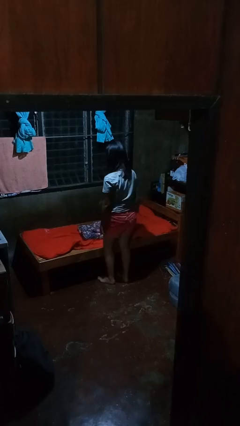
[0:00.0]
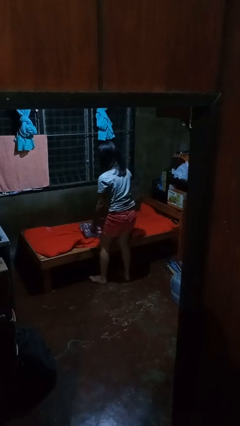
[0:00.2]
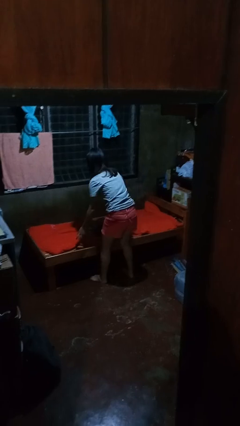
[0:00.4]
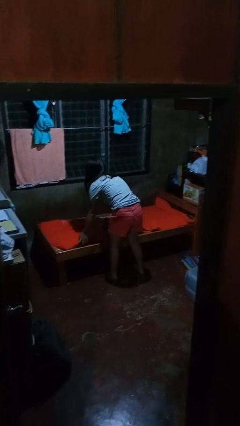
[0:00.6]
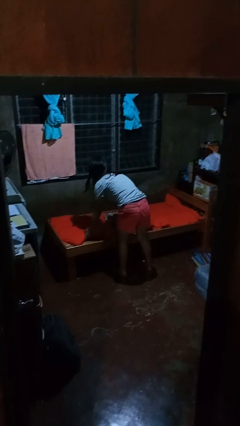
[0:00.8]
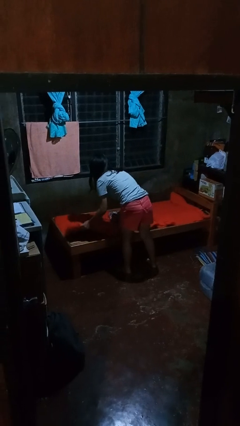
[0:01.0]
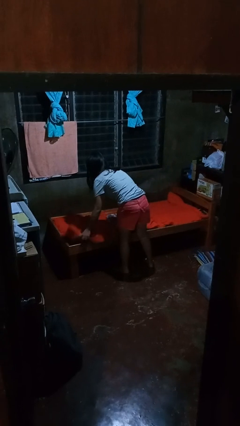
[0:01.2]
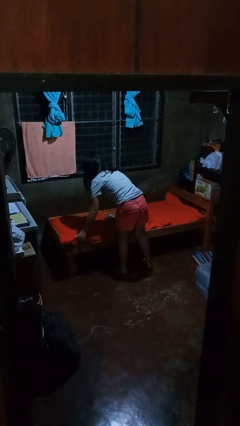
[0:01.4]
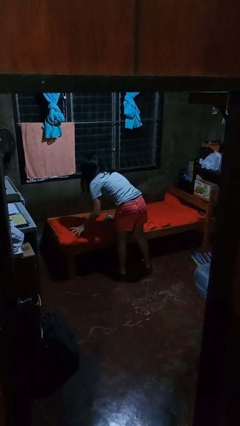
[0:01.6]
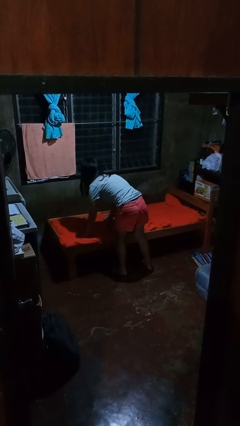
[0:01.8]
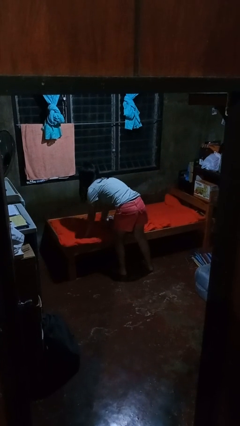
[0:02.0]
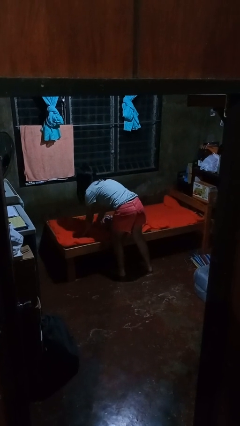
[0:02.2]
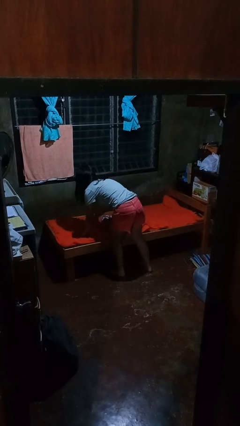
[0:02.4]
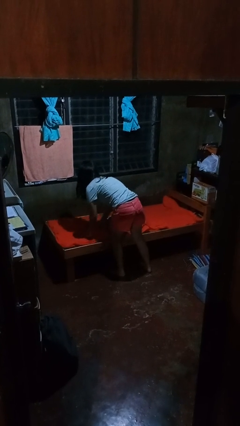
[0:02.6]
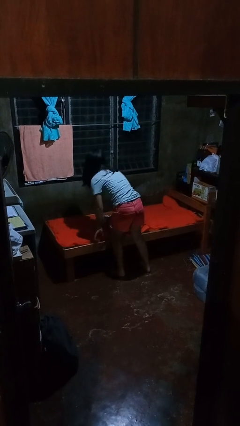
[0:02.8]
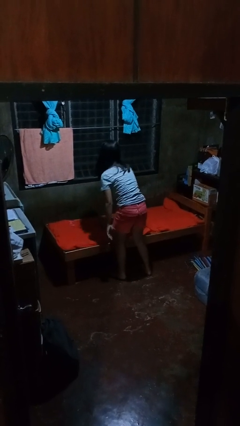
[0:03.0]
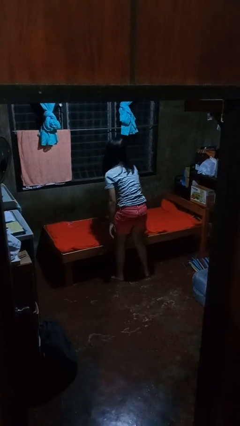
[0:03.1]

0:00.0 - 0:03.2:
person makes bed

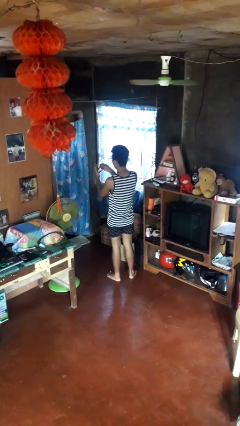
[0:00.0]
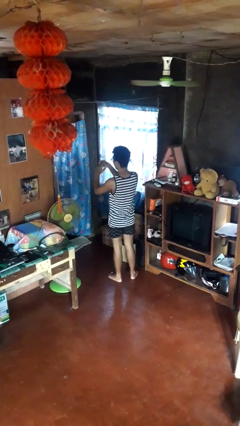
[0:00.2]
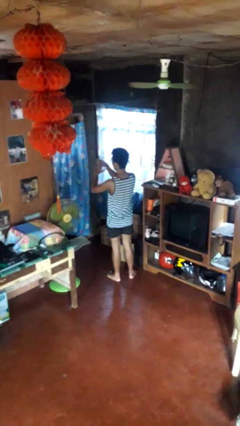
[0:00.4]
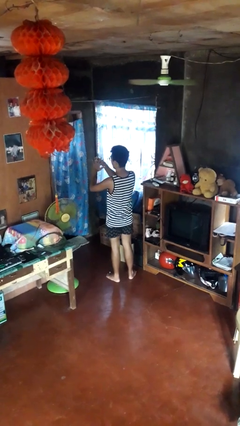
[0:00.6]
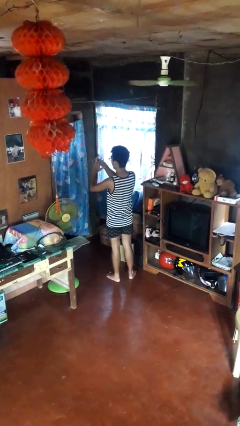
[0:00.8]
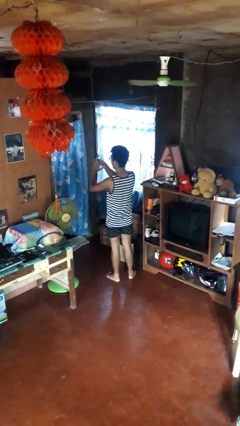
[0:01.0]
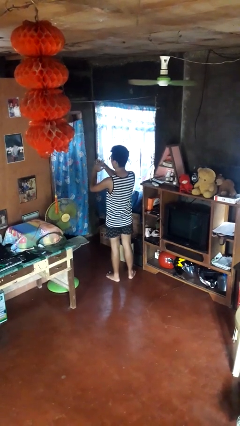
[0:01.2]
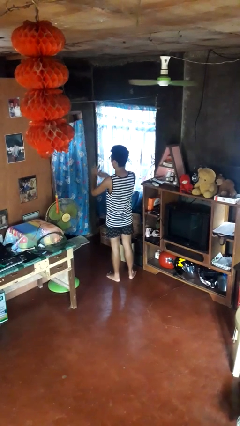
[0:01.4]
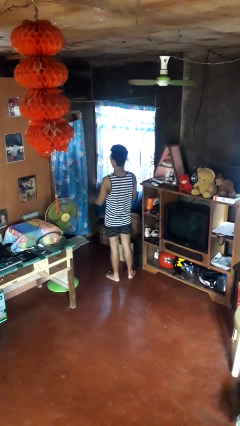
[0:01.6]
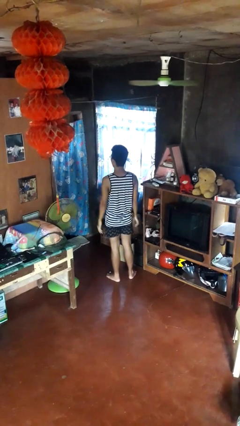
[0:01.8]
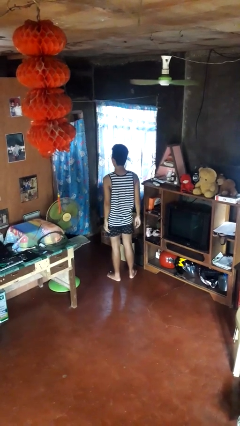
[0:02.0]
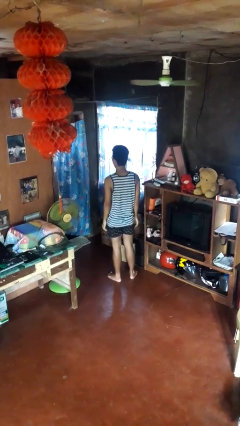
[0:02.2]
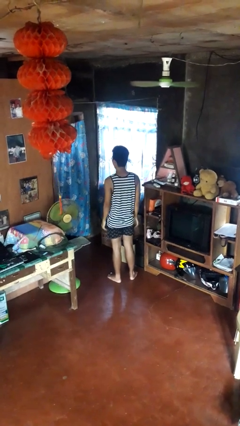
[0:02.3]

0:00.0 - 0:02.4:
person puts on ring

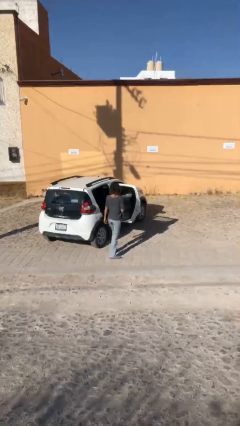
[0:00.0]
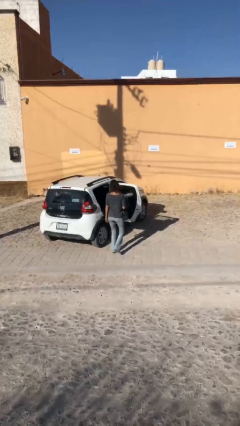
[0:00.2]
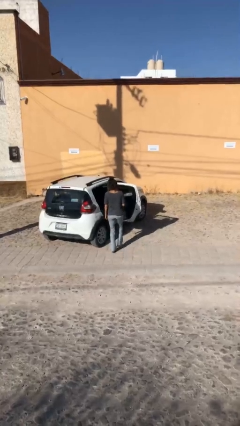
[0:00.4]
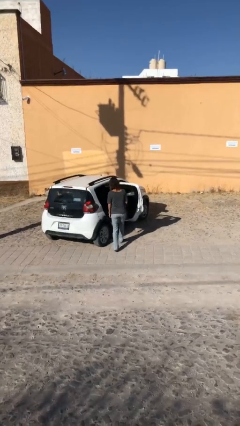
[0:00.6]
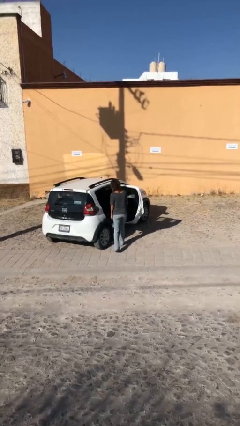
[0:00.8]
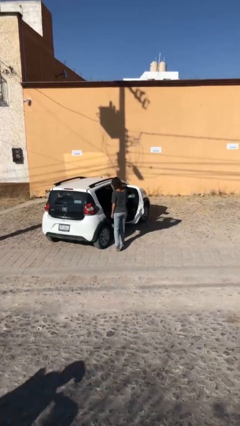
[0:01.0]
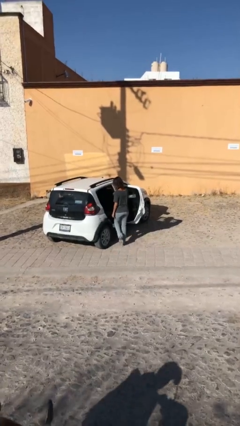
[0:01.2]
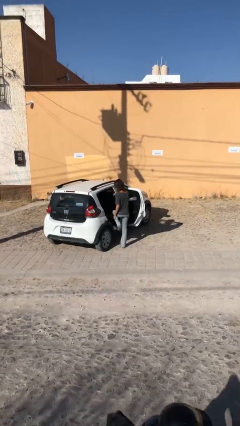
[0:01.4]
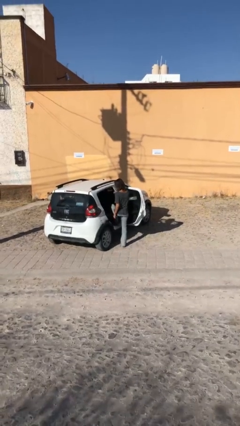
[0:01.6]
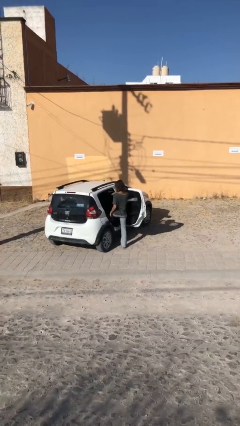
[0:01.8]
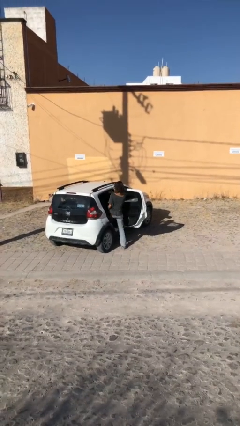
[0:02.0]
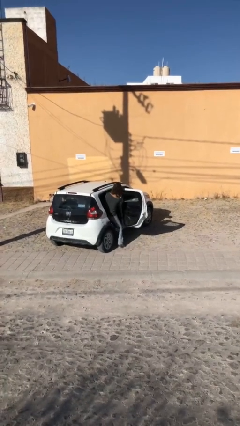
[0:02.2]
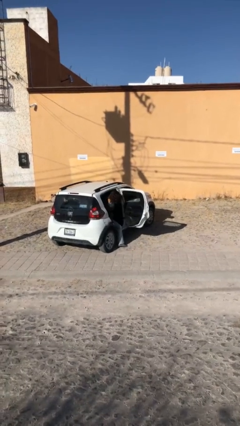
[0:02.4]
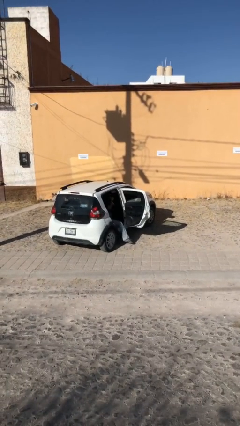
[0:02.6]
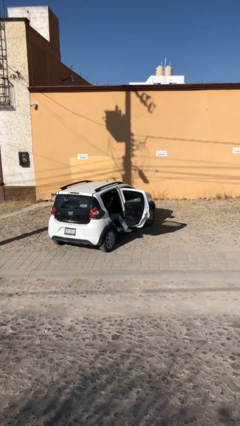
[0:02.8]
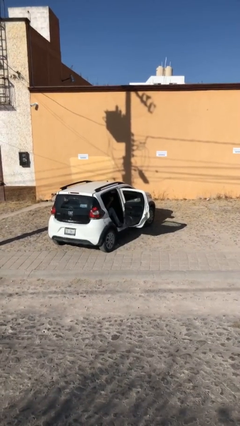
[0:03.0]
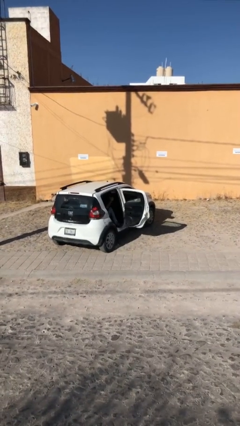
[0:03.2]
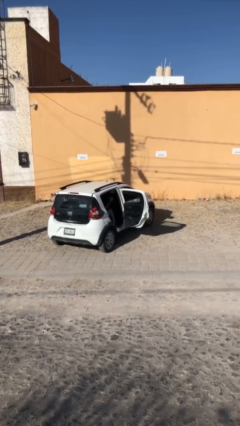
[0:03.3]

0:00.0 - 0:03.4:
person enters car

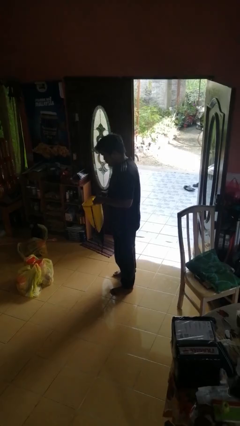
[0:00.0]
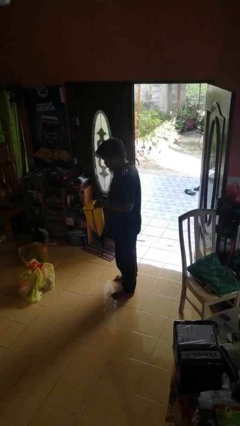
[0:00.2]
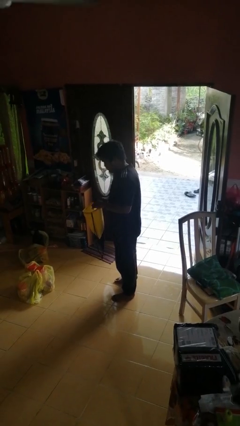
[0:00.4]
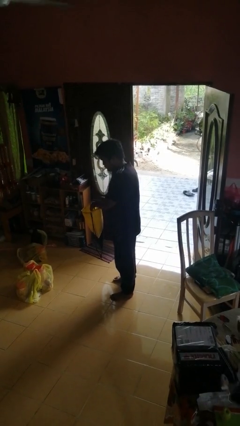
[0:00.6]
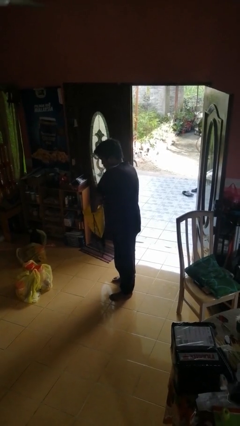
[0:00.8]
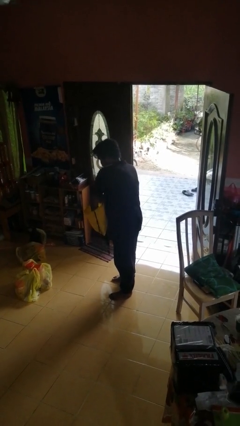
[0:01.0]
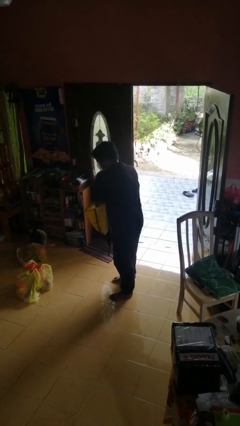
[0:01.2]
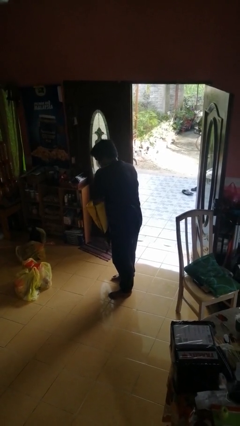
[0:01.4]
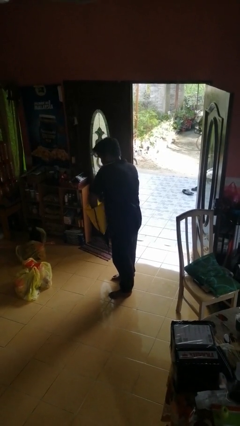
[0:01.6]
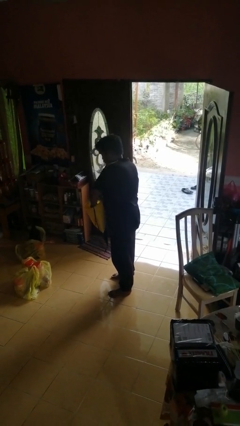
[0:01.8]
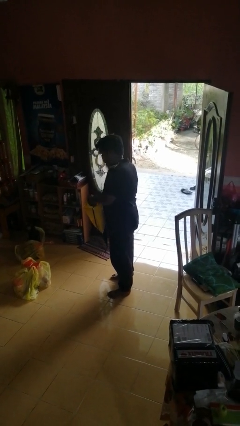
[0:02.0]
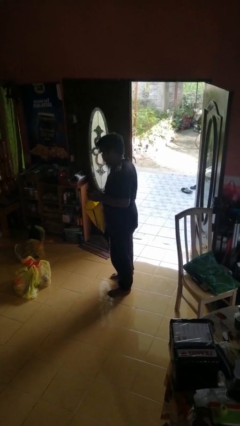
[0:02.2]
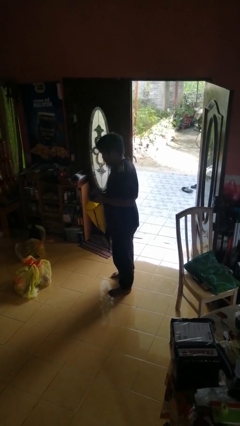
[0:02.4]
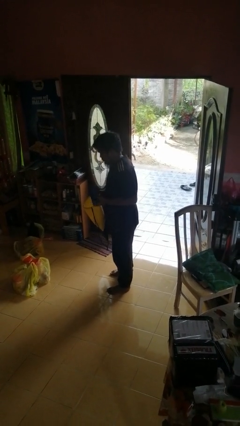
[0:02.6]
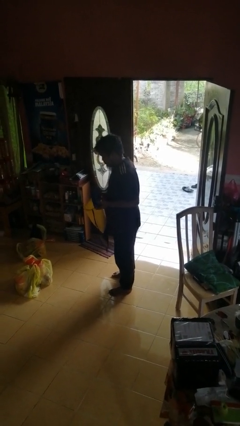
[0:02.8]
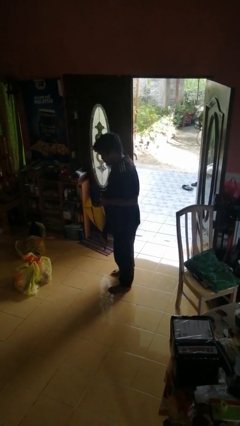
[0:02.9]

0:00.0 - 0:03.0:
person takes object from bag

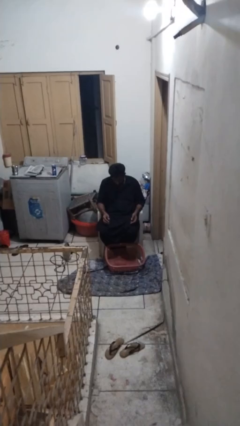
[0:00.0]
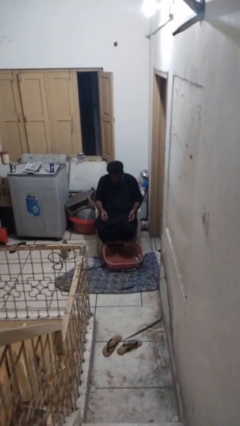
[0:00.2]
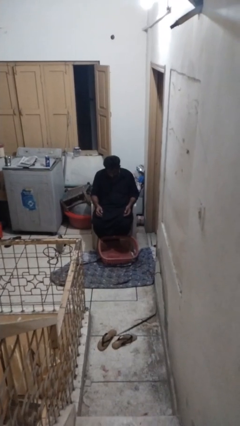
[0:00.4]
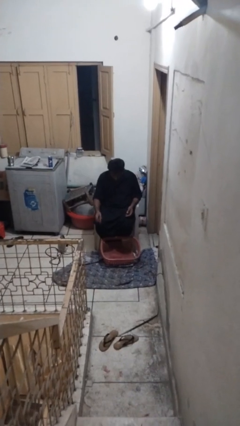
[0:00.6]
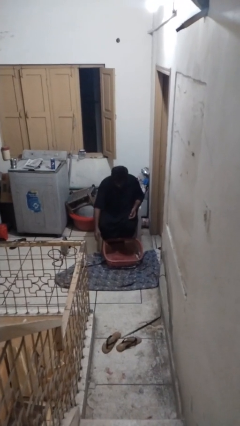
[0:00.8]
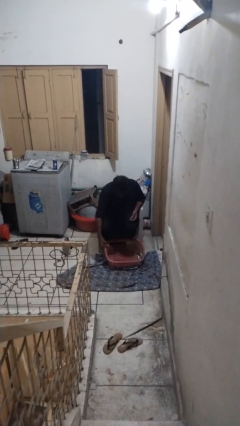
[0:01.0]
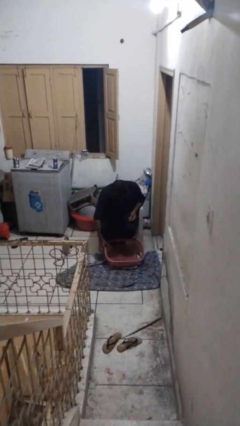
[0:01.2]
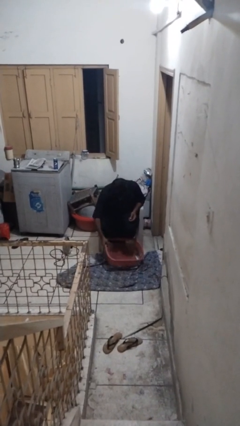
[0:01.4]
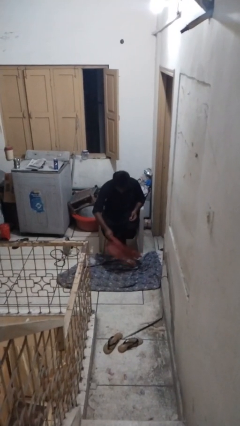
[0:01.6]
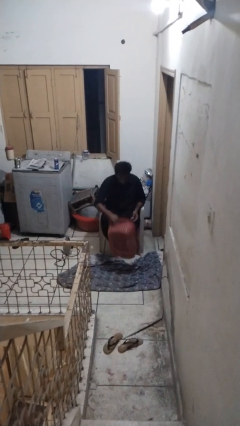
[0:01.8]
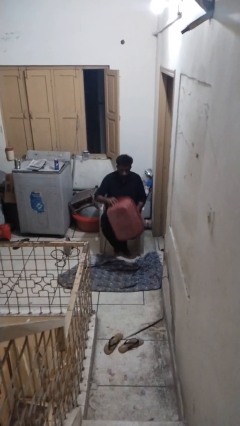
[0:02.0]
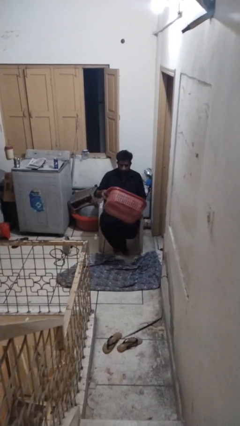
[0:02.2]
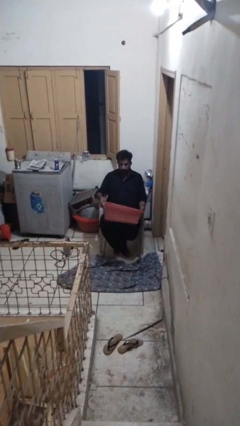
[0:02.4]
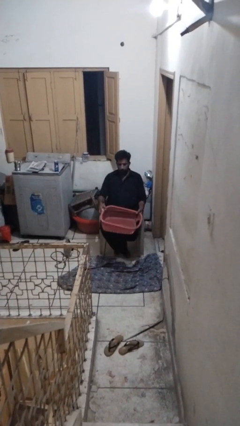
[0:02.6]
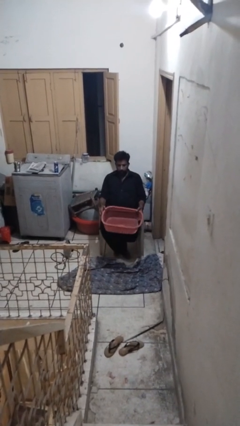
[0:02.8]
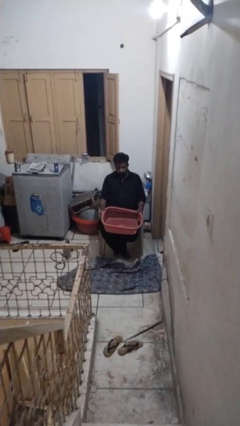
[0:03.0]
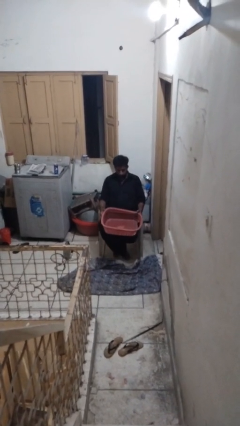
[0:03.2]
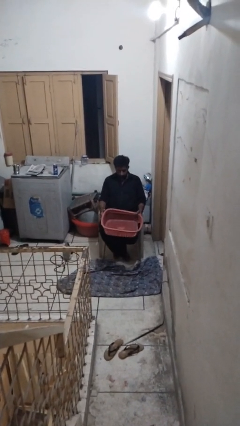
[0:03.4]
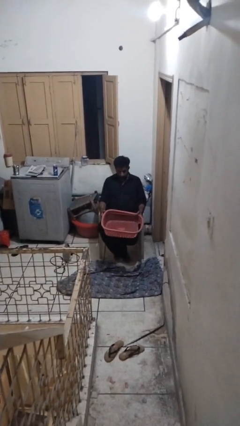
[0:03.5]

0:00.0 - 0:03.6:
person picks up object from floor

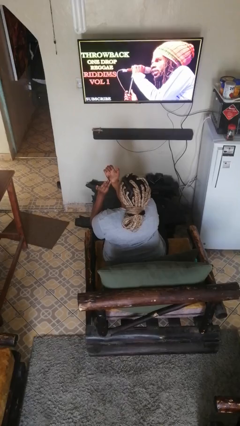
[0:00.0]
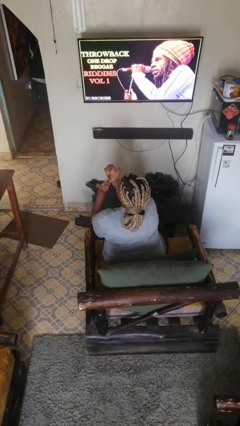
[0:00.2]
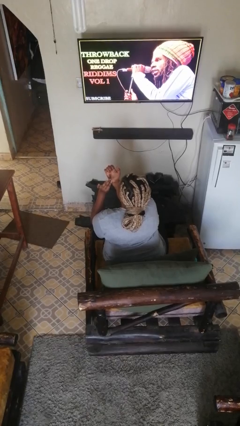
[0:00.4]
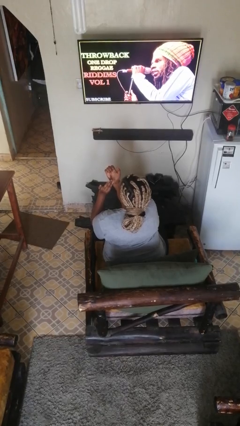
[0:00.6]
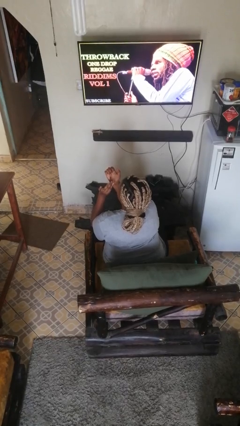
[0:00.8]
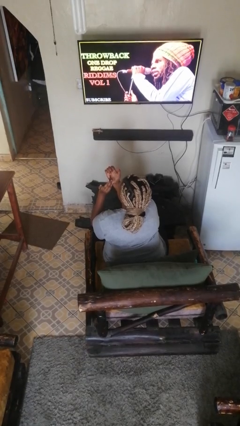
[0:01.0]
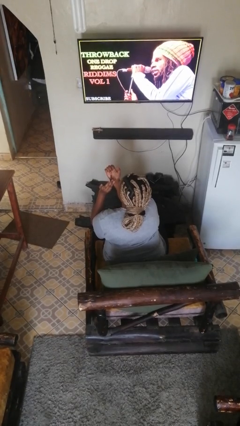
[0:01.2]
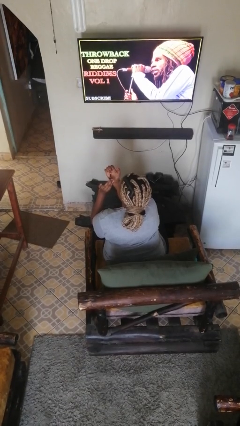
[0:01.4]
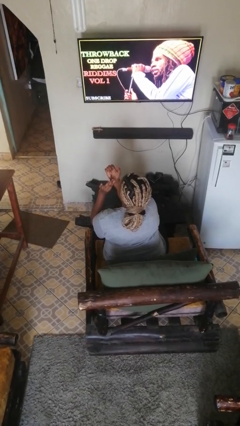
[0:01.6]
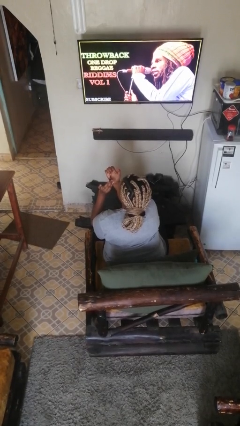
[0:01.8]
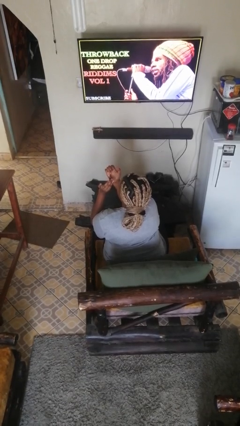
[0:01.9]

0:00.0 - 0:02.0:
person paints fingernails
